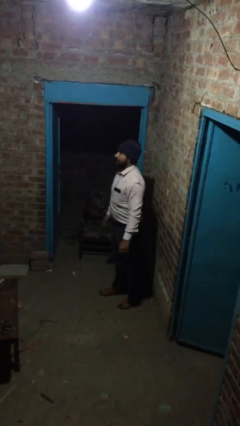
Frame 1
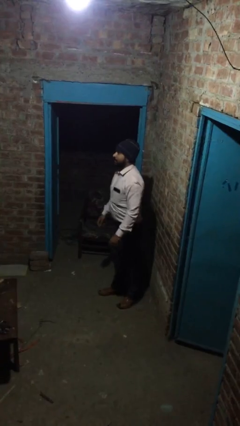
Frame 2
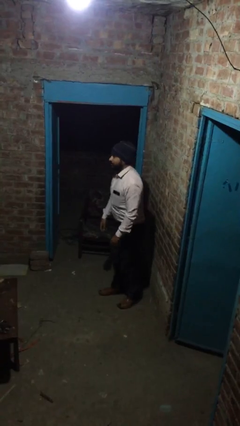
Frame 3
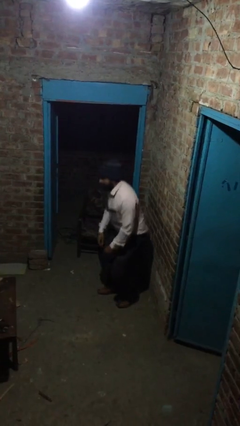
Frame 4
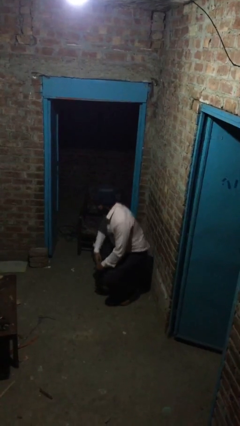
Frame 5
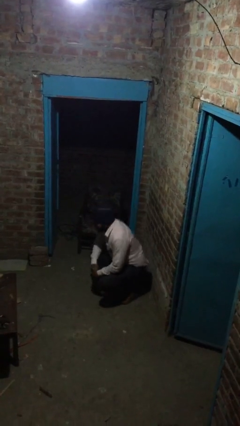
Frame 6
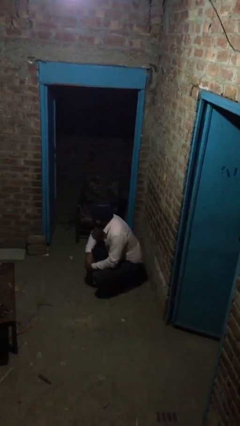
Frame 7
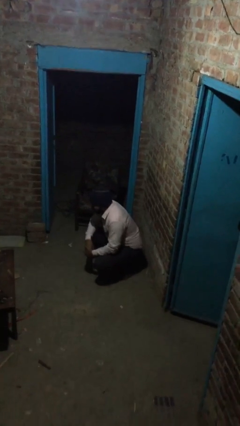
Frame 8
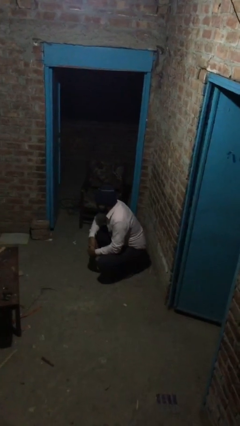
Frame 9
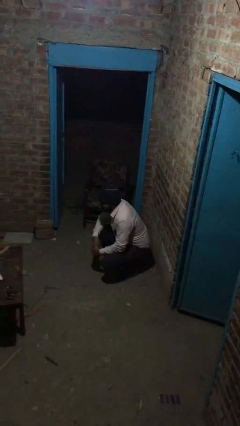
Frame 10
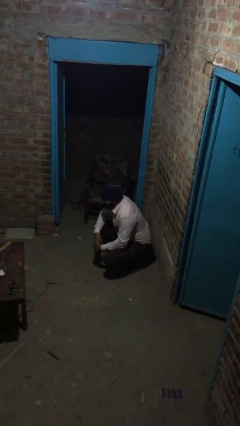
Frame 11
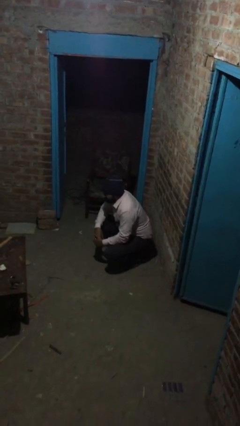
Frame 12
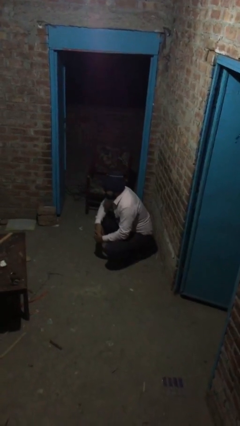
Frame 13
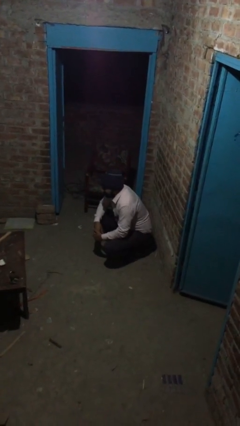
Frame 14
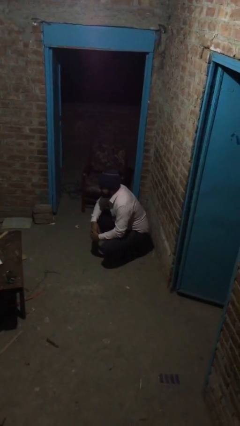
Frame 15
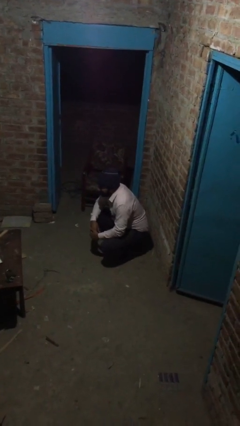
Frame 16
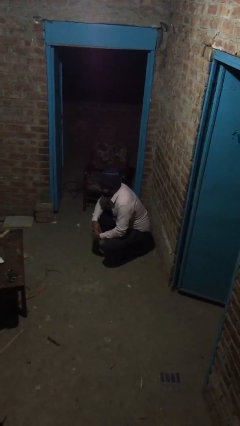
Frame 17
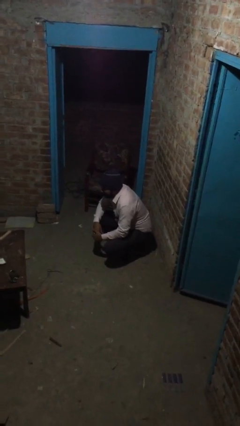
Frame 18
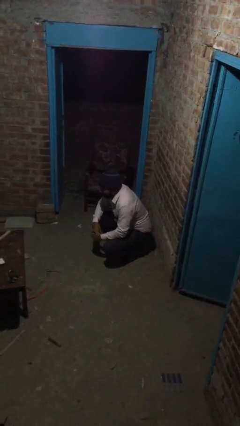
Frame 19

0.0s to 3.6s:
person sits down

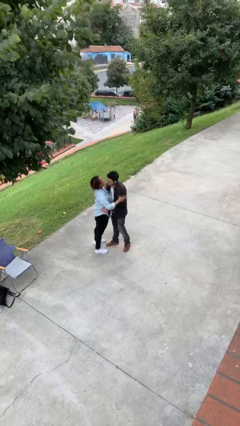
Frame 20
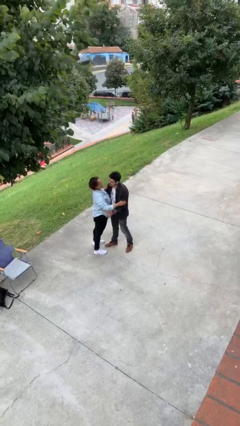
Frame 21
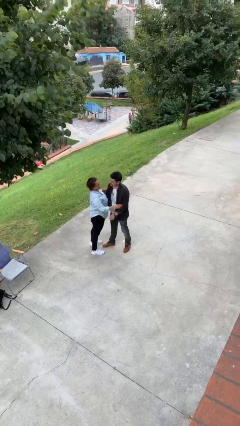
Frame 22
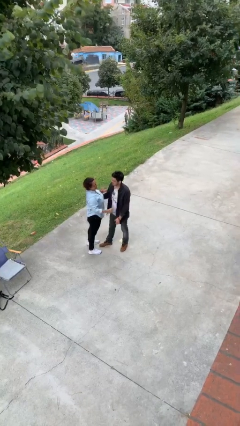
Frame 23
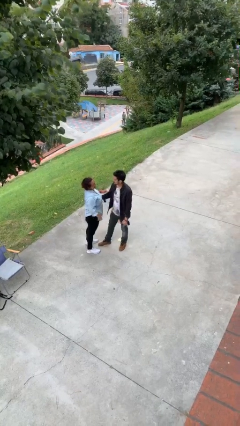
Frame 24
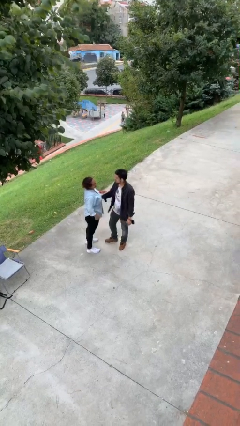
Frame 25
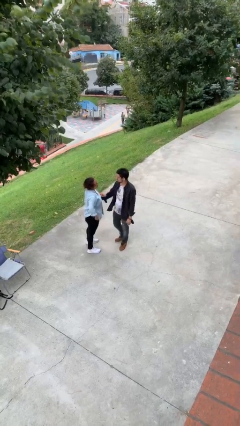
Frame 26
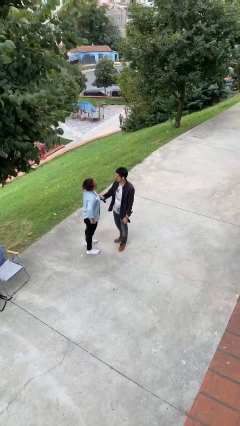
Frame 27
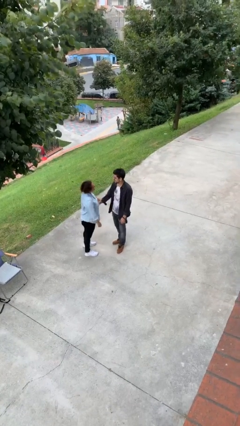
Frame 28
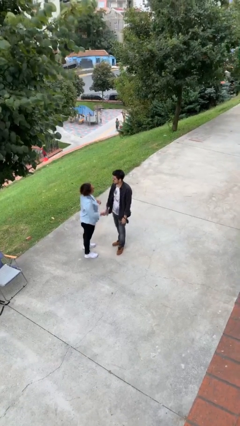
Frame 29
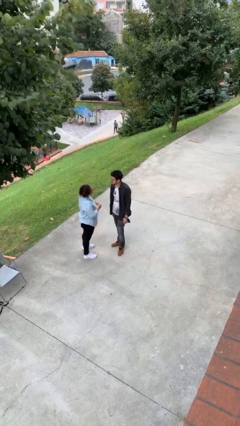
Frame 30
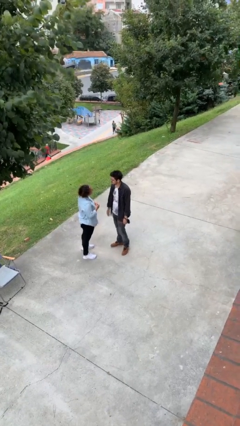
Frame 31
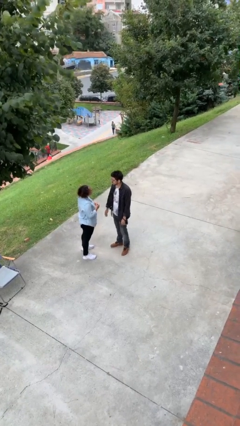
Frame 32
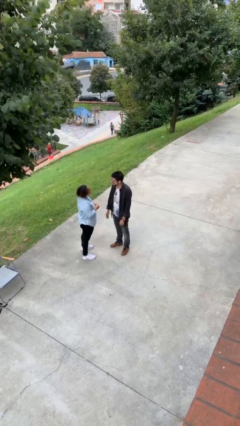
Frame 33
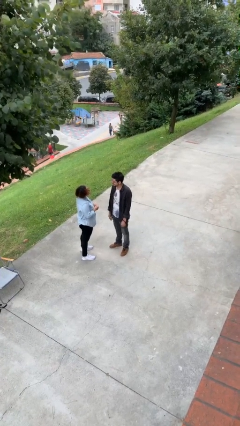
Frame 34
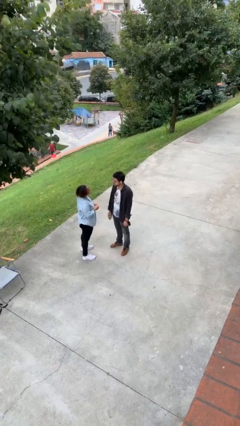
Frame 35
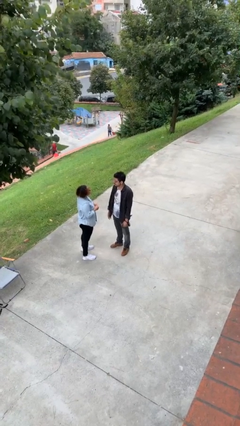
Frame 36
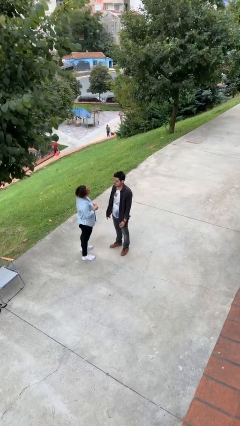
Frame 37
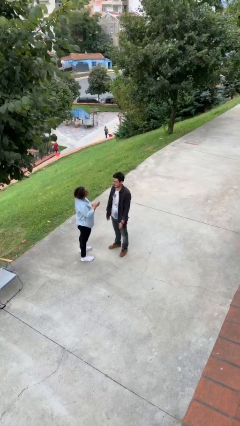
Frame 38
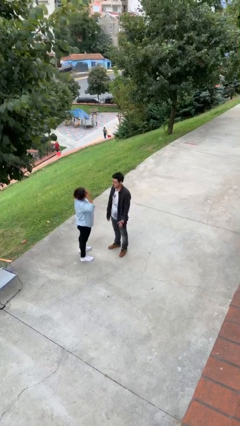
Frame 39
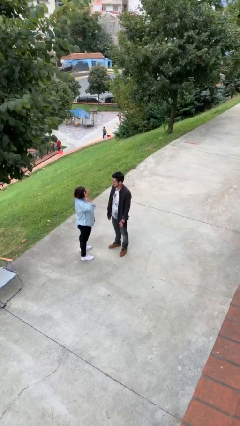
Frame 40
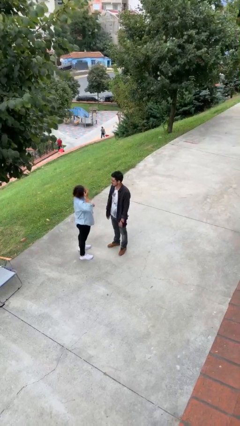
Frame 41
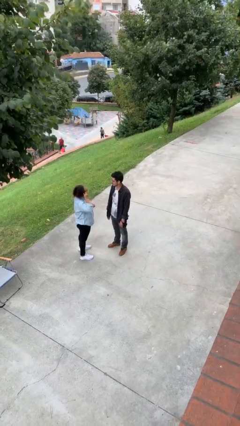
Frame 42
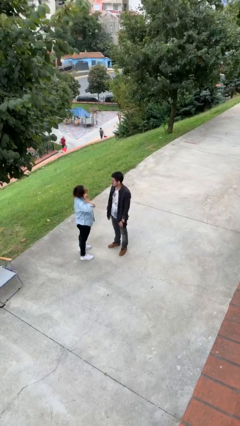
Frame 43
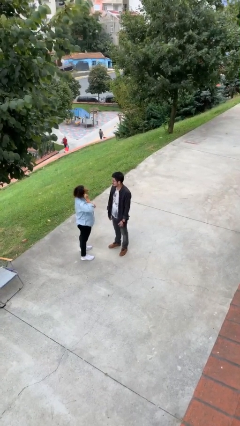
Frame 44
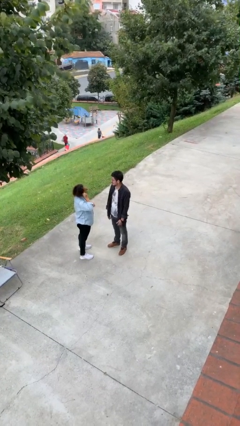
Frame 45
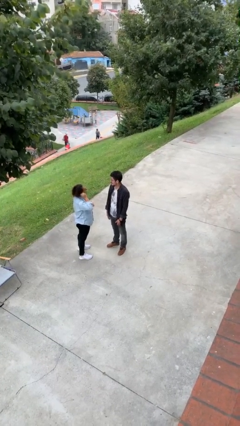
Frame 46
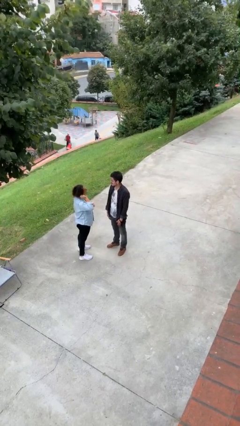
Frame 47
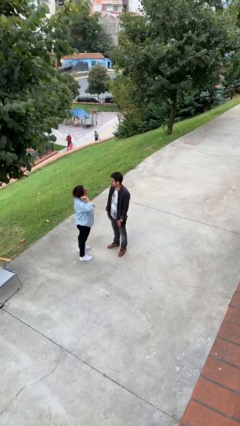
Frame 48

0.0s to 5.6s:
person talks to person

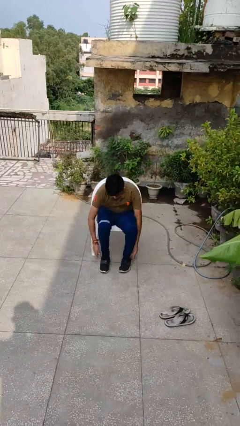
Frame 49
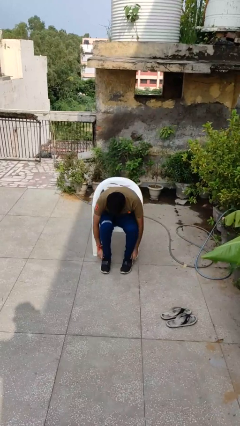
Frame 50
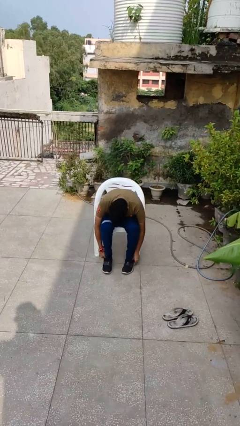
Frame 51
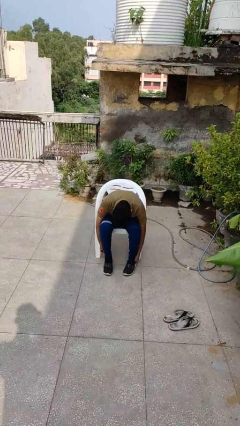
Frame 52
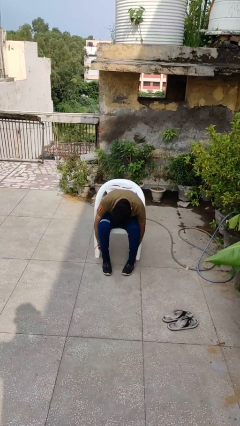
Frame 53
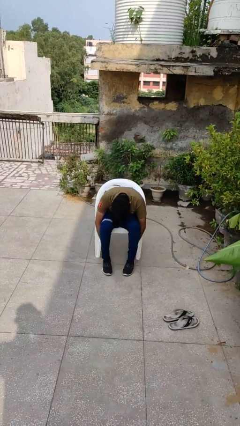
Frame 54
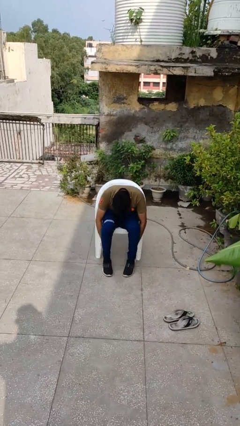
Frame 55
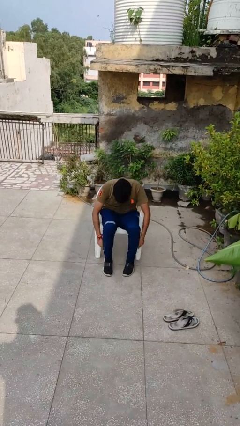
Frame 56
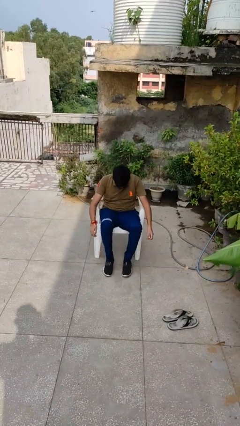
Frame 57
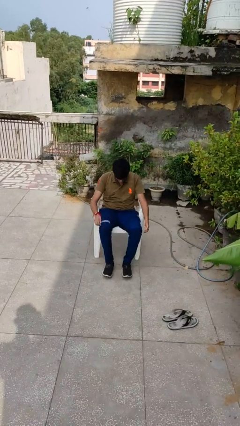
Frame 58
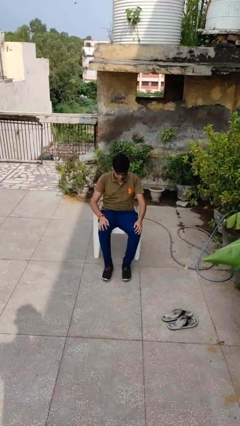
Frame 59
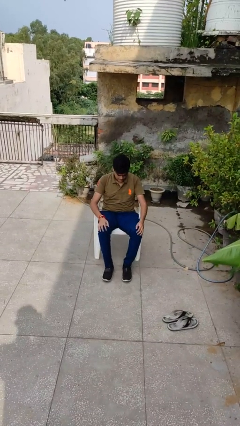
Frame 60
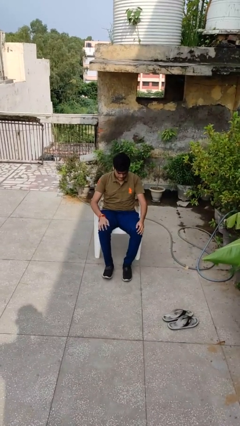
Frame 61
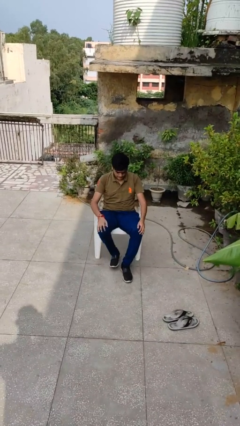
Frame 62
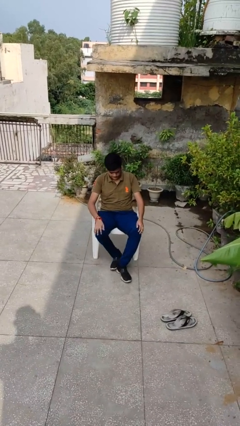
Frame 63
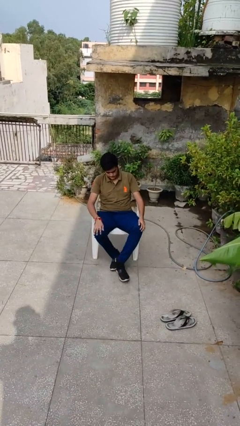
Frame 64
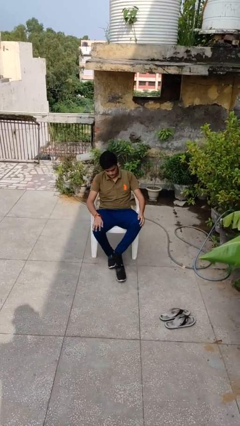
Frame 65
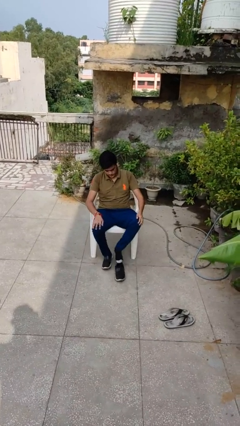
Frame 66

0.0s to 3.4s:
person puts on shoes

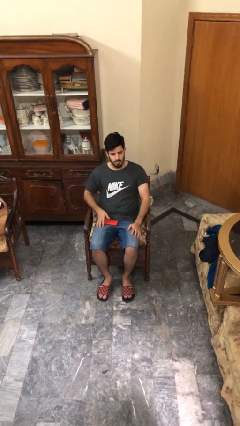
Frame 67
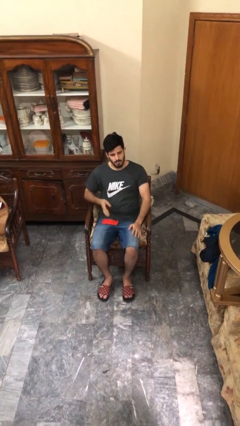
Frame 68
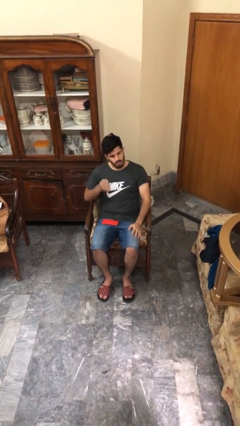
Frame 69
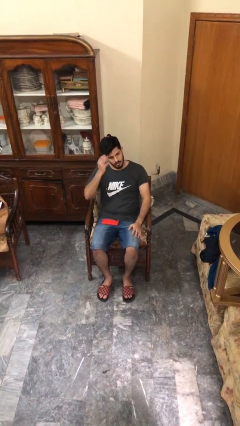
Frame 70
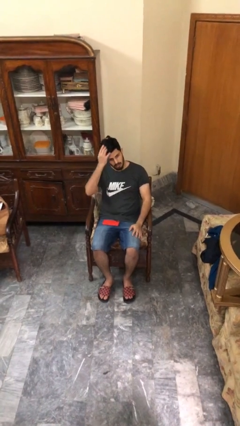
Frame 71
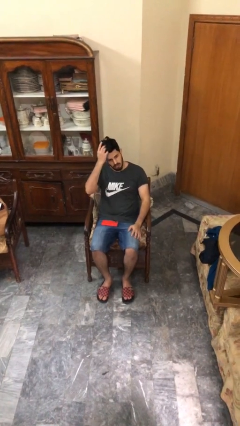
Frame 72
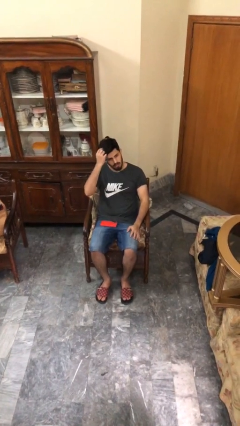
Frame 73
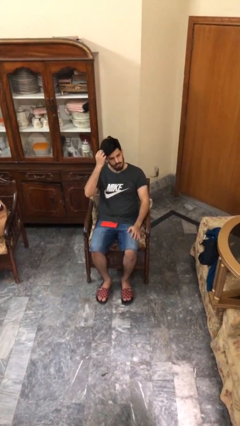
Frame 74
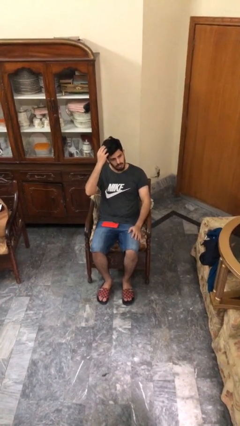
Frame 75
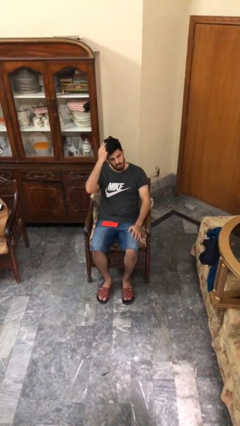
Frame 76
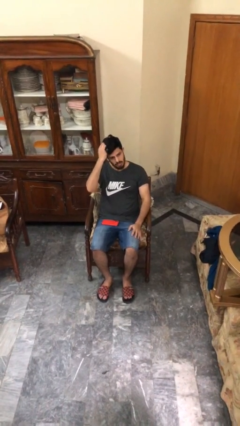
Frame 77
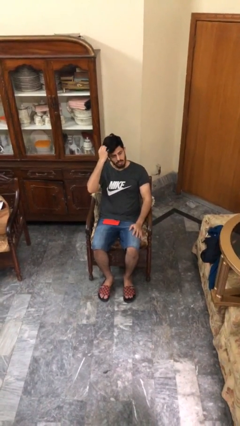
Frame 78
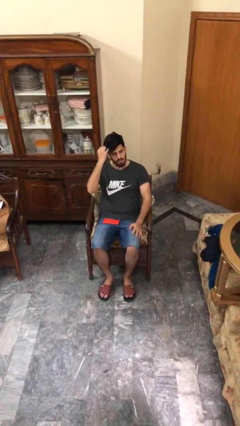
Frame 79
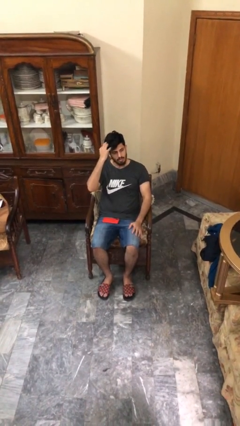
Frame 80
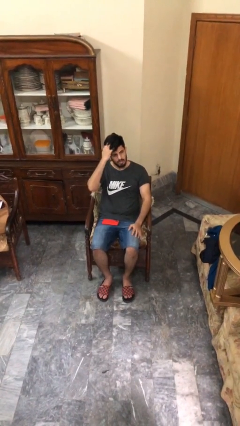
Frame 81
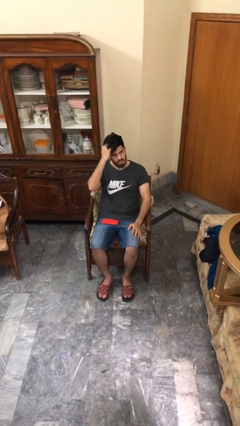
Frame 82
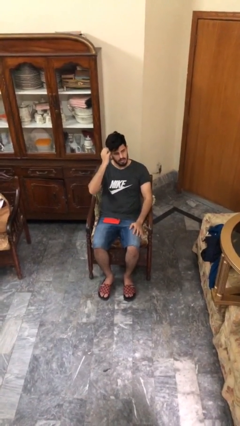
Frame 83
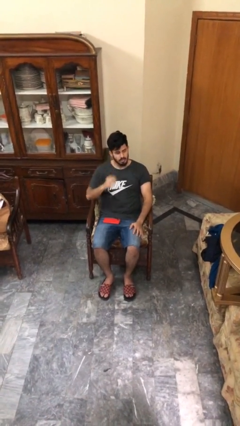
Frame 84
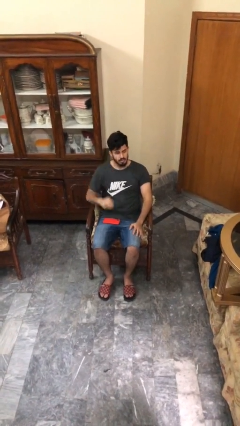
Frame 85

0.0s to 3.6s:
person strokes hair

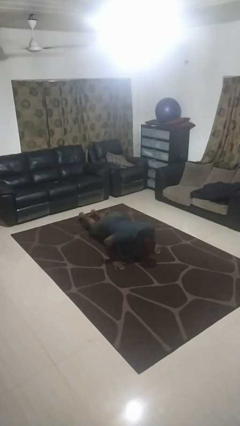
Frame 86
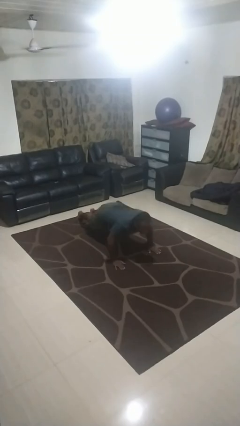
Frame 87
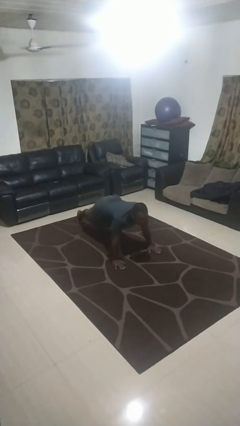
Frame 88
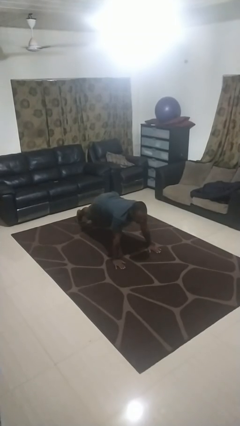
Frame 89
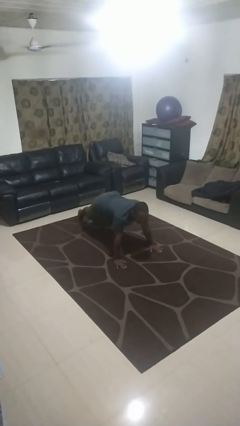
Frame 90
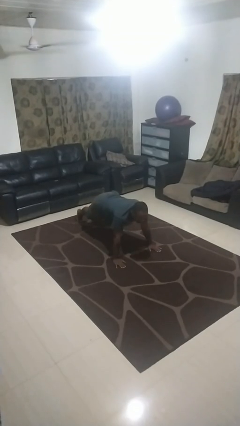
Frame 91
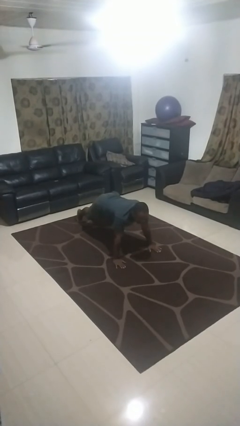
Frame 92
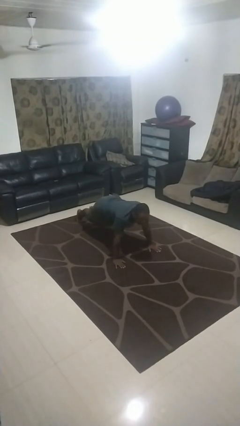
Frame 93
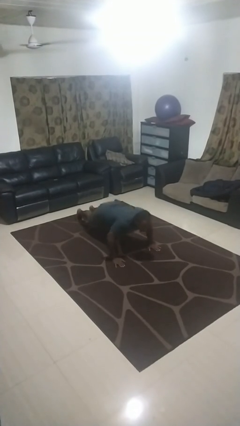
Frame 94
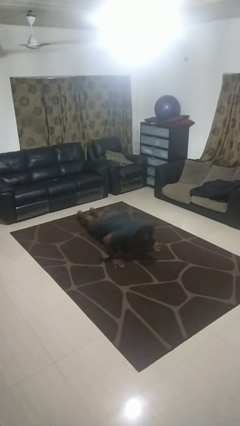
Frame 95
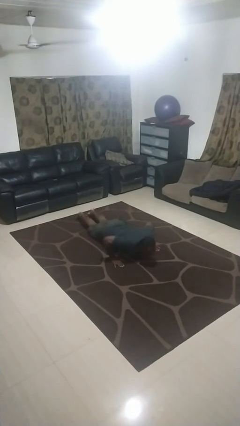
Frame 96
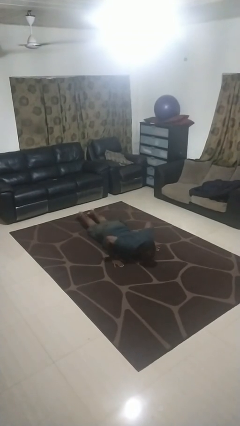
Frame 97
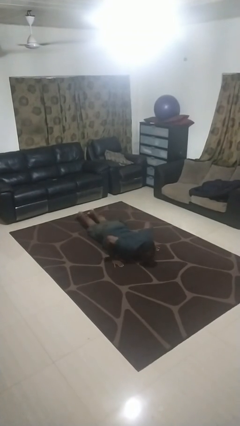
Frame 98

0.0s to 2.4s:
person exercises with pushup
